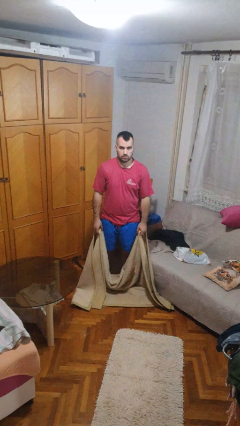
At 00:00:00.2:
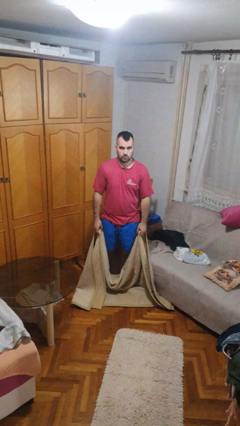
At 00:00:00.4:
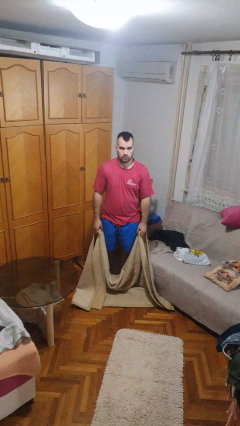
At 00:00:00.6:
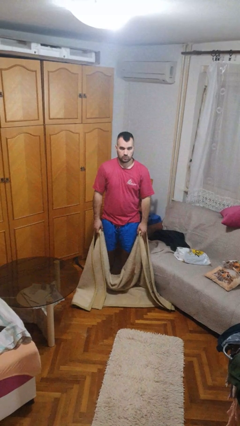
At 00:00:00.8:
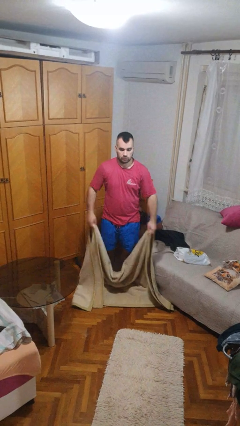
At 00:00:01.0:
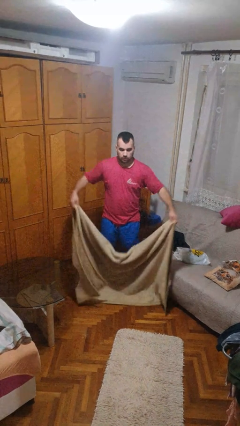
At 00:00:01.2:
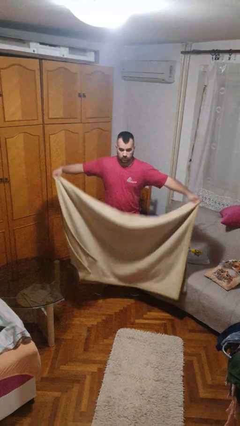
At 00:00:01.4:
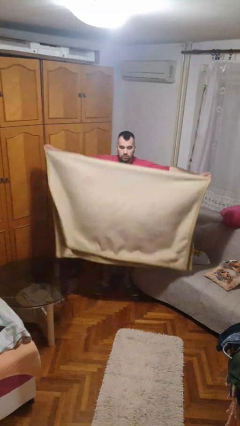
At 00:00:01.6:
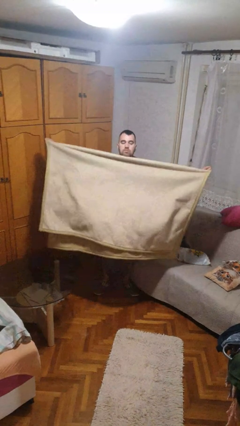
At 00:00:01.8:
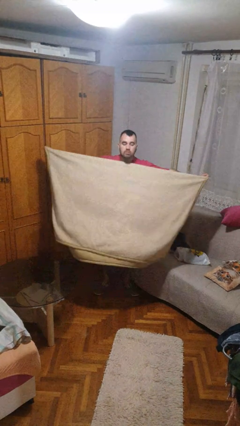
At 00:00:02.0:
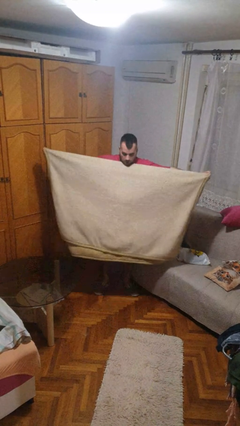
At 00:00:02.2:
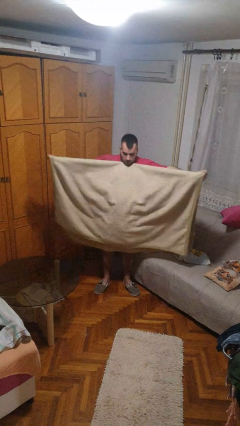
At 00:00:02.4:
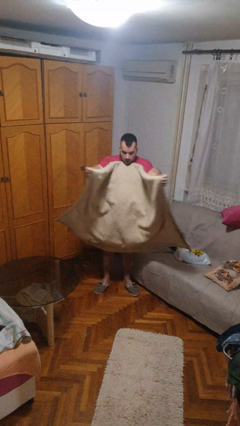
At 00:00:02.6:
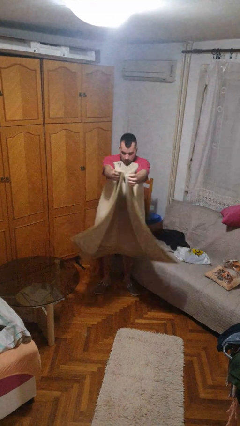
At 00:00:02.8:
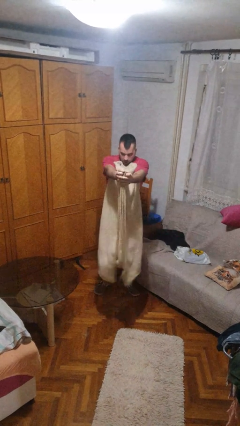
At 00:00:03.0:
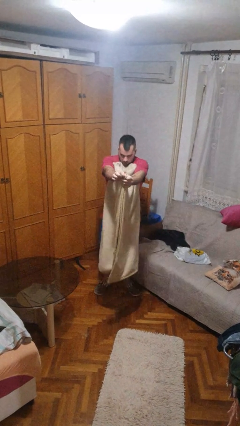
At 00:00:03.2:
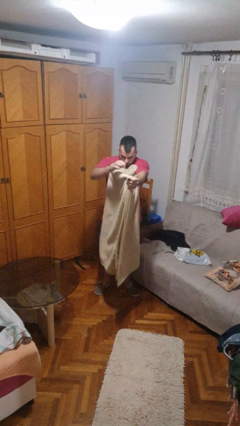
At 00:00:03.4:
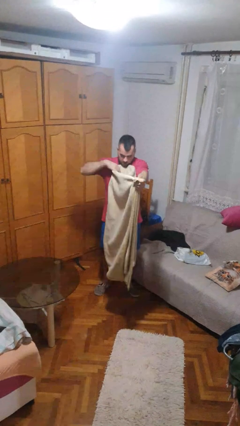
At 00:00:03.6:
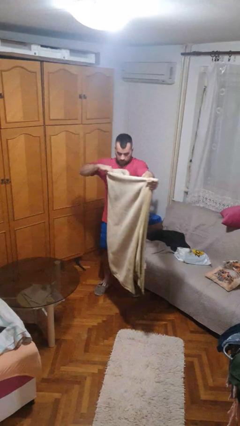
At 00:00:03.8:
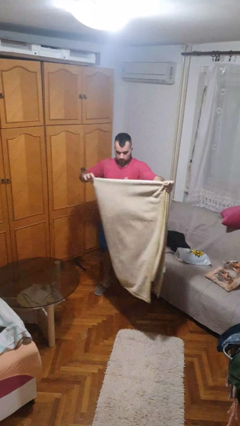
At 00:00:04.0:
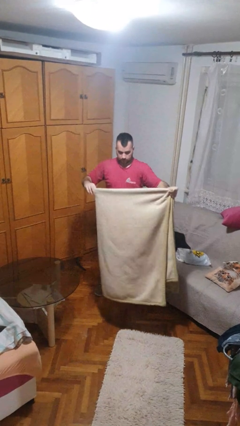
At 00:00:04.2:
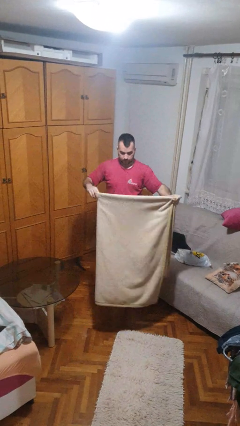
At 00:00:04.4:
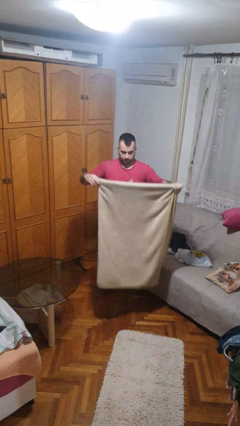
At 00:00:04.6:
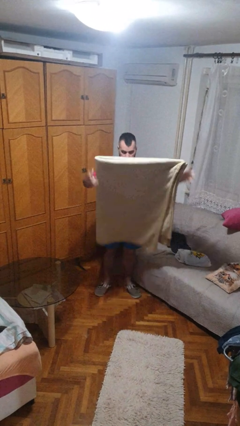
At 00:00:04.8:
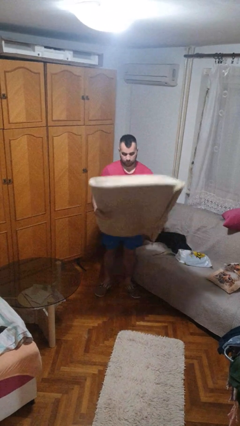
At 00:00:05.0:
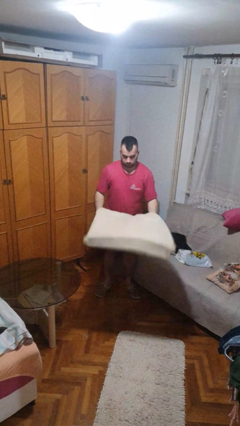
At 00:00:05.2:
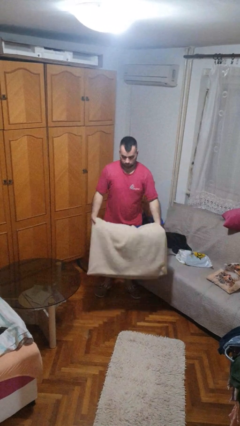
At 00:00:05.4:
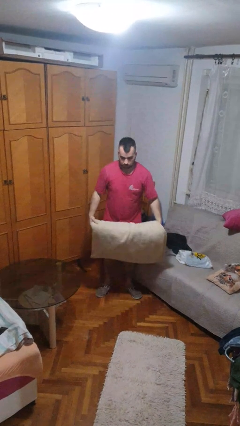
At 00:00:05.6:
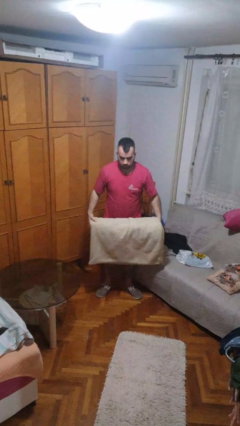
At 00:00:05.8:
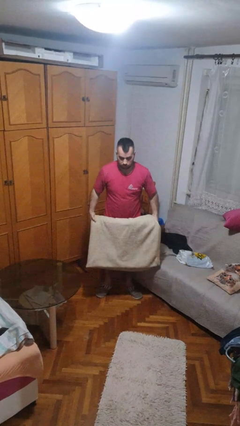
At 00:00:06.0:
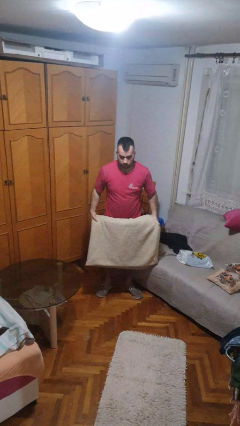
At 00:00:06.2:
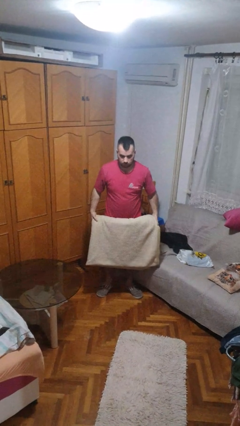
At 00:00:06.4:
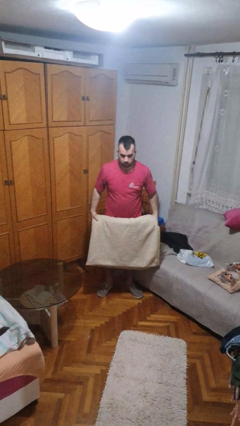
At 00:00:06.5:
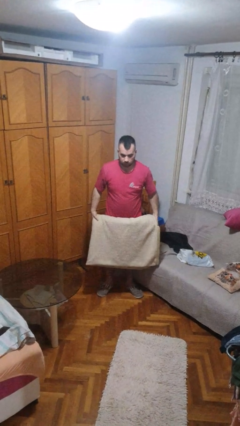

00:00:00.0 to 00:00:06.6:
person folds blanket

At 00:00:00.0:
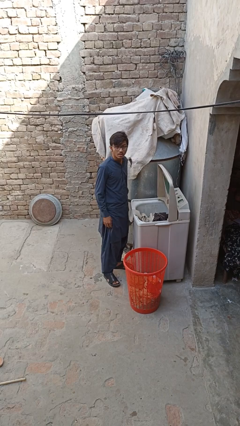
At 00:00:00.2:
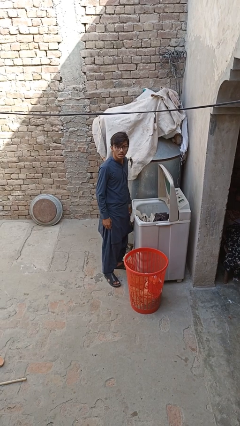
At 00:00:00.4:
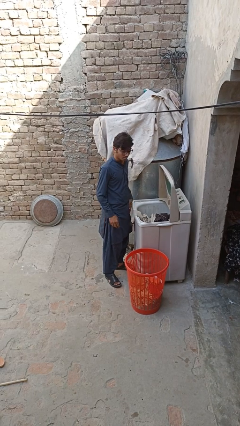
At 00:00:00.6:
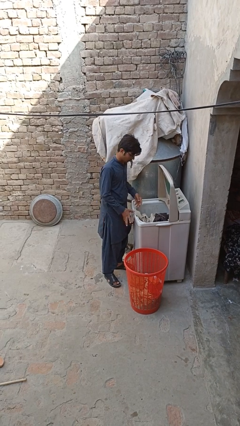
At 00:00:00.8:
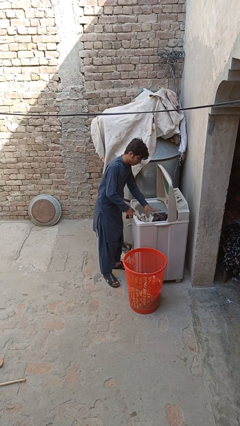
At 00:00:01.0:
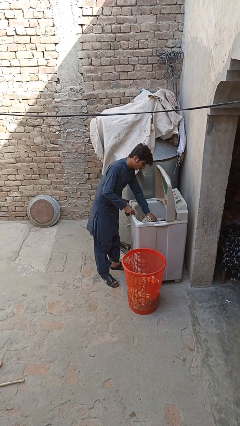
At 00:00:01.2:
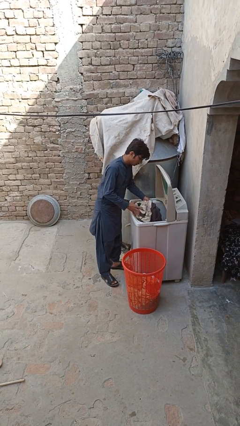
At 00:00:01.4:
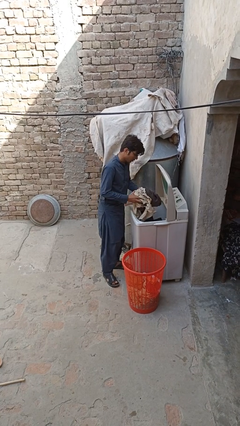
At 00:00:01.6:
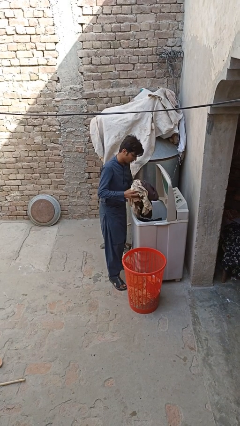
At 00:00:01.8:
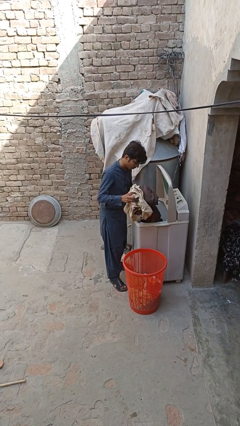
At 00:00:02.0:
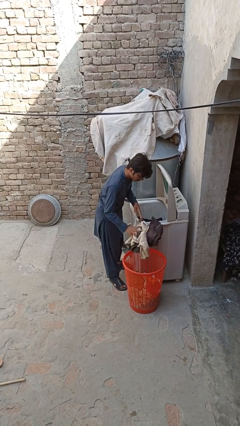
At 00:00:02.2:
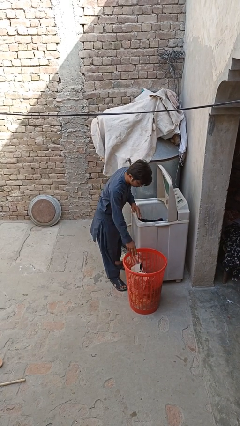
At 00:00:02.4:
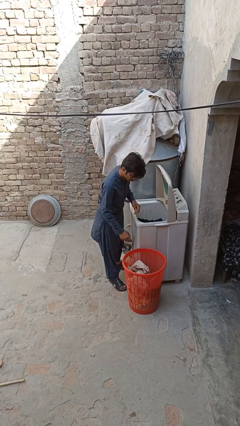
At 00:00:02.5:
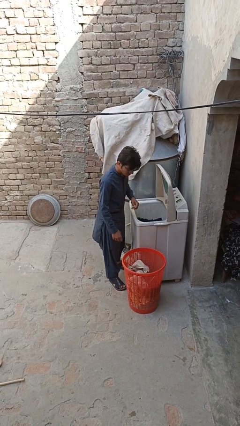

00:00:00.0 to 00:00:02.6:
person unloads clotheswasher

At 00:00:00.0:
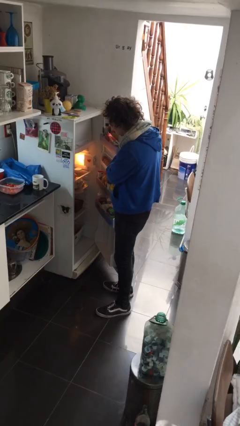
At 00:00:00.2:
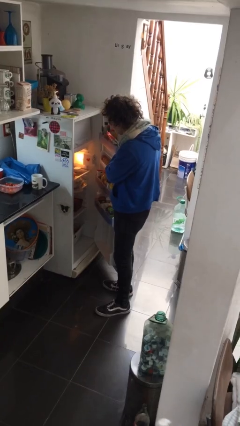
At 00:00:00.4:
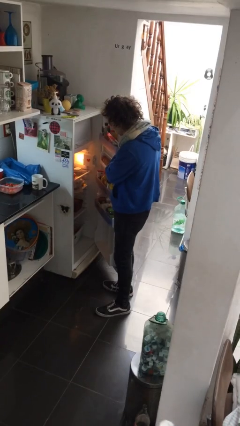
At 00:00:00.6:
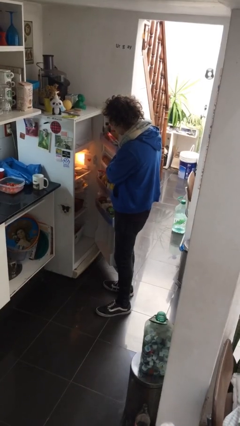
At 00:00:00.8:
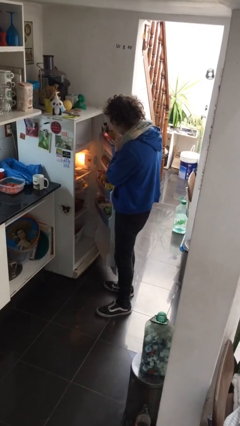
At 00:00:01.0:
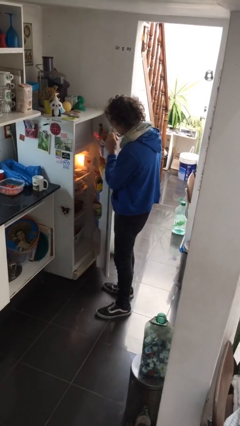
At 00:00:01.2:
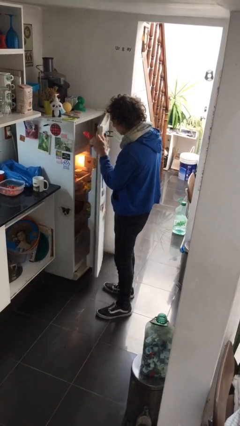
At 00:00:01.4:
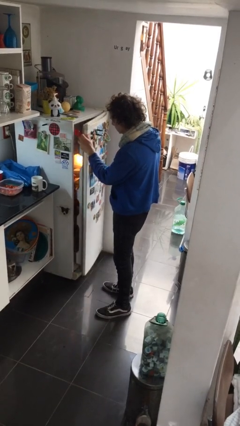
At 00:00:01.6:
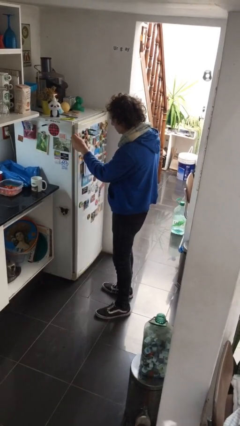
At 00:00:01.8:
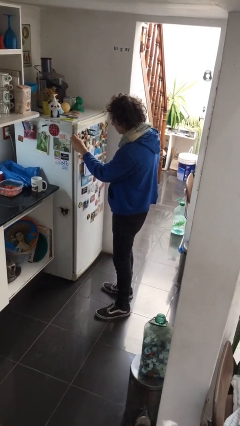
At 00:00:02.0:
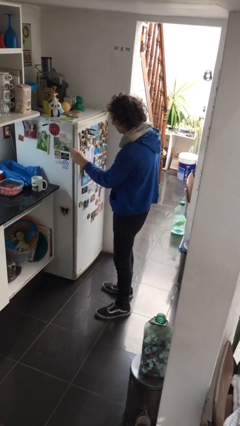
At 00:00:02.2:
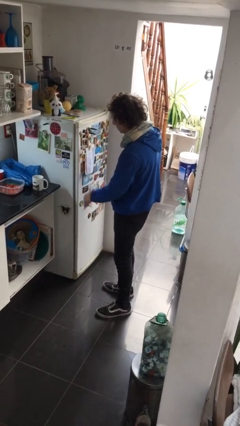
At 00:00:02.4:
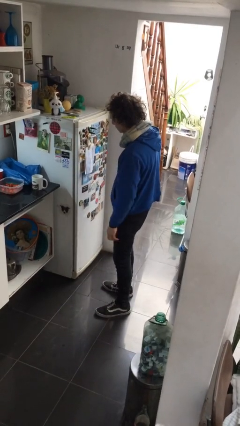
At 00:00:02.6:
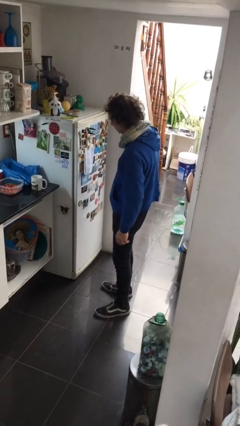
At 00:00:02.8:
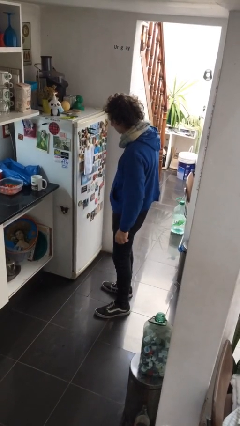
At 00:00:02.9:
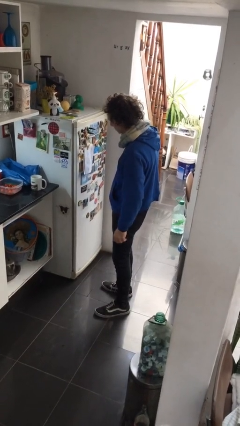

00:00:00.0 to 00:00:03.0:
person closes refrigerator

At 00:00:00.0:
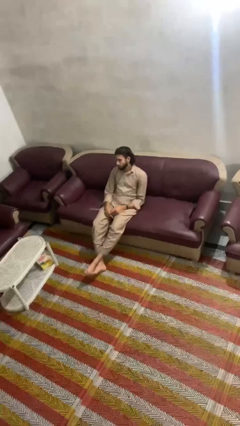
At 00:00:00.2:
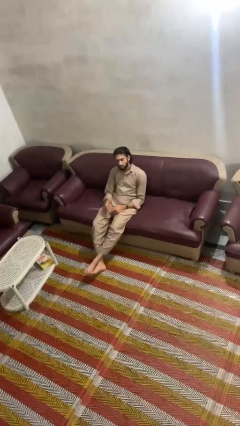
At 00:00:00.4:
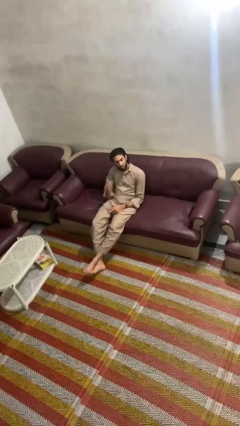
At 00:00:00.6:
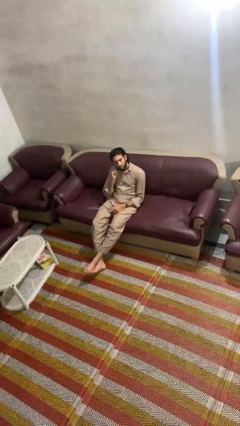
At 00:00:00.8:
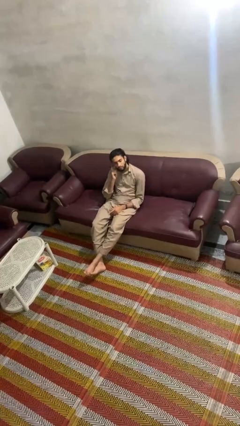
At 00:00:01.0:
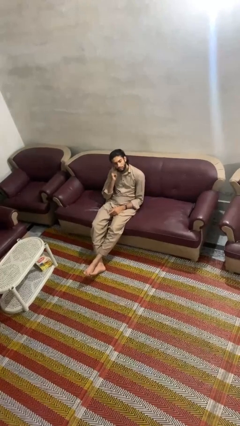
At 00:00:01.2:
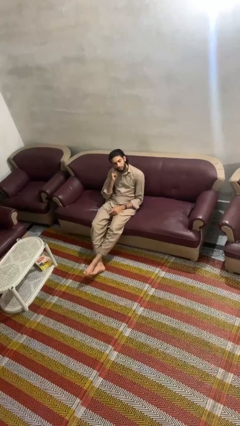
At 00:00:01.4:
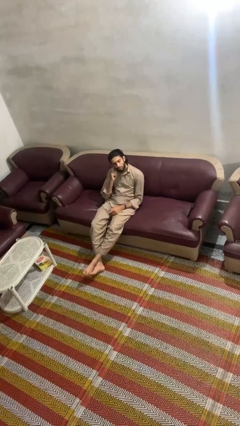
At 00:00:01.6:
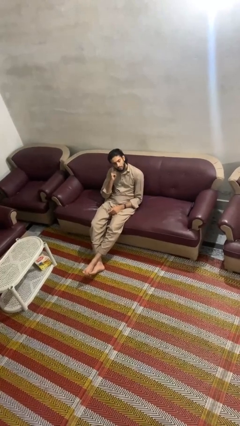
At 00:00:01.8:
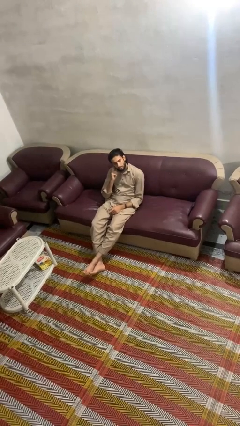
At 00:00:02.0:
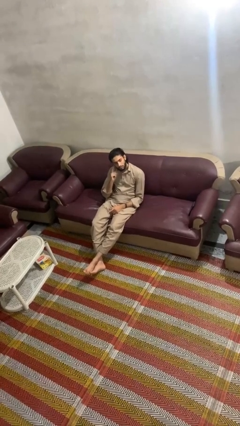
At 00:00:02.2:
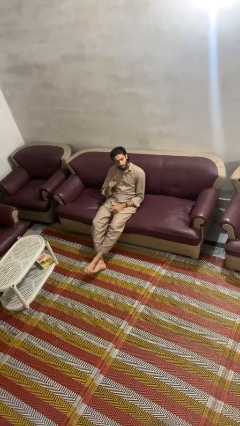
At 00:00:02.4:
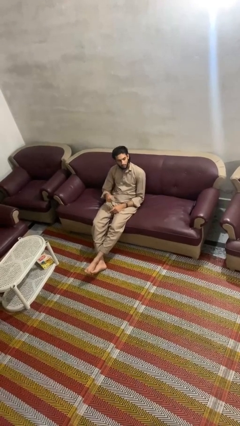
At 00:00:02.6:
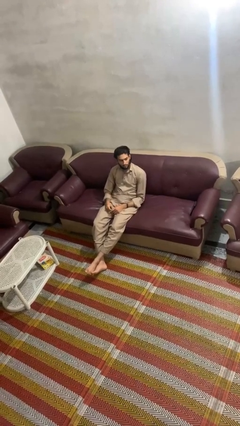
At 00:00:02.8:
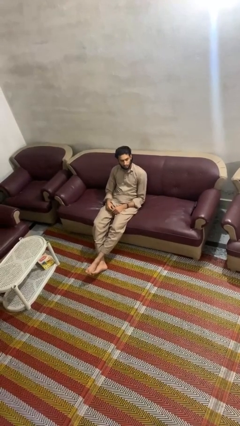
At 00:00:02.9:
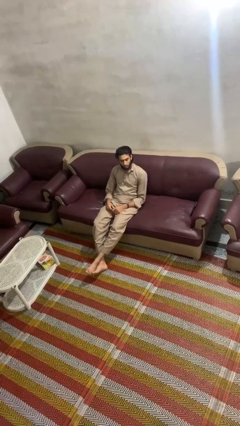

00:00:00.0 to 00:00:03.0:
person gestures listen closely

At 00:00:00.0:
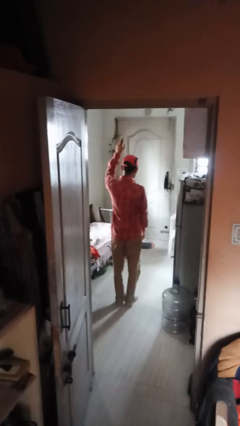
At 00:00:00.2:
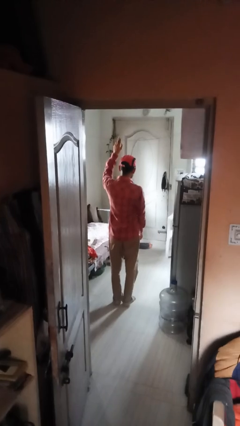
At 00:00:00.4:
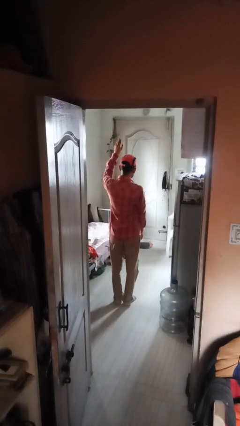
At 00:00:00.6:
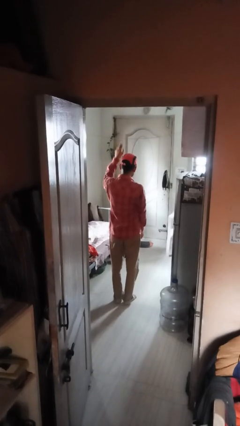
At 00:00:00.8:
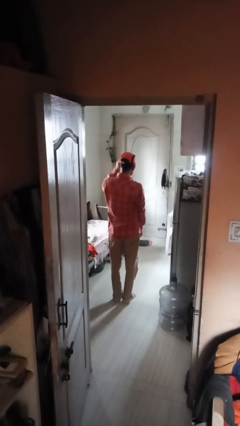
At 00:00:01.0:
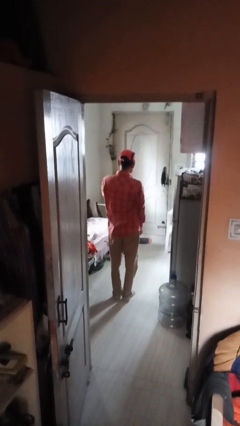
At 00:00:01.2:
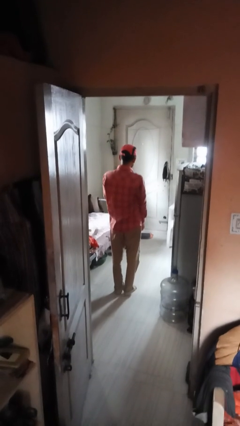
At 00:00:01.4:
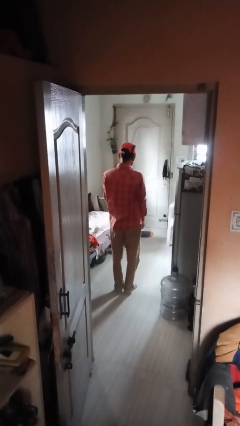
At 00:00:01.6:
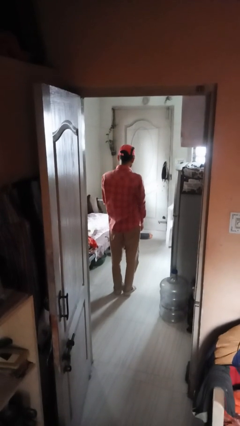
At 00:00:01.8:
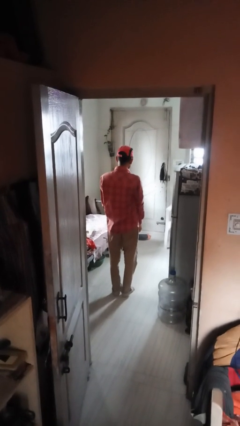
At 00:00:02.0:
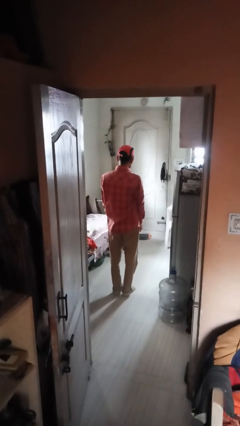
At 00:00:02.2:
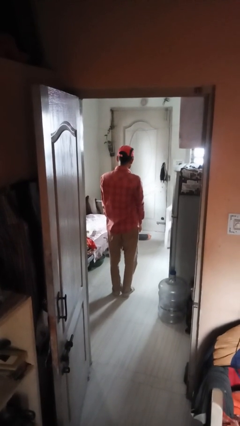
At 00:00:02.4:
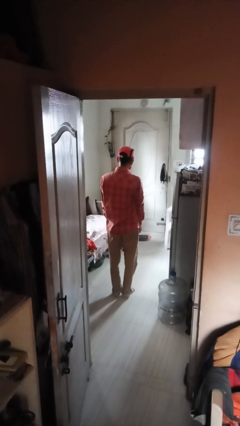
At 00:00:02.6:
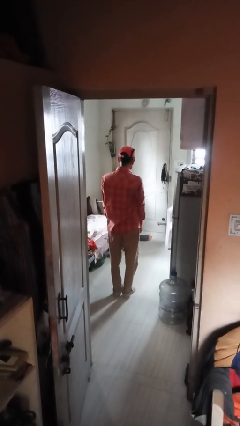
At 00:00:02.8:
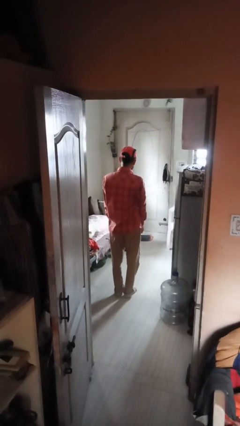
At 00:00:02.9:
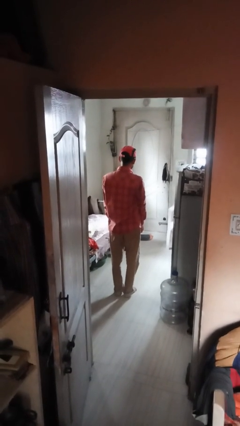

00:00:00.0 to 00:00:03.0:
person gestures swipe down
